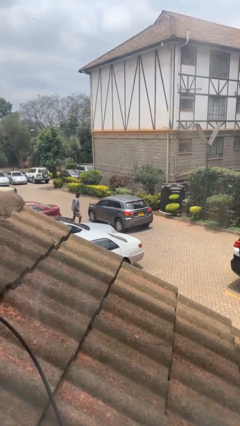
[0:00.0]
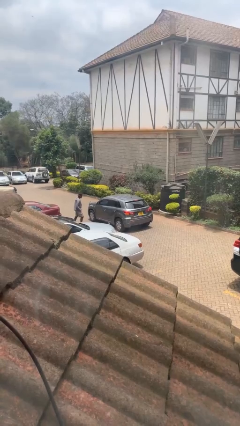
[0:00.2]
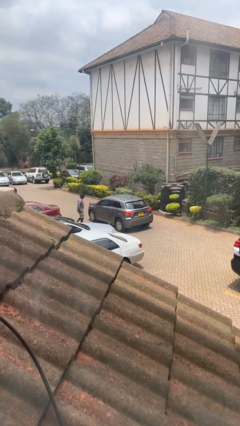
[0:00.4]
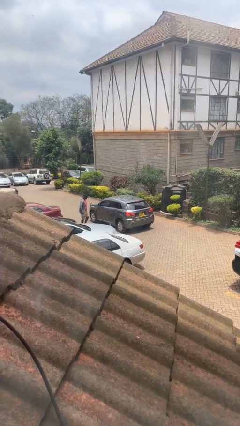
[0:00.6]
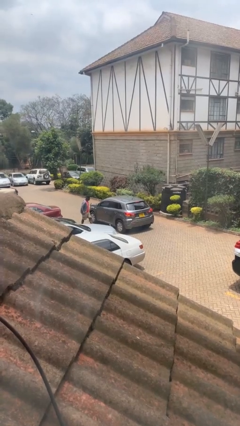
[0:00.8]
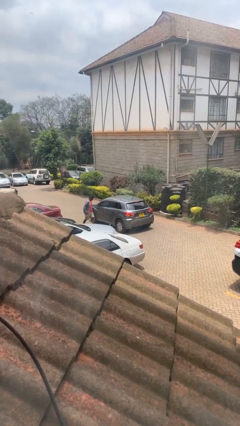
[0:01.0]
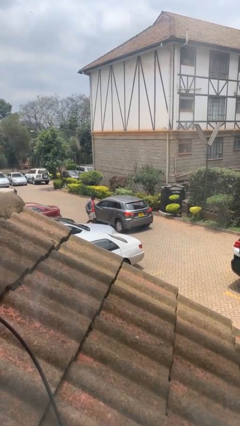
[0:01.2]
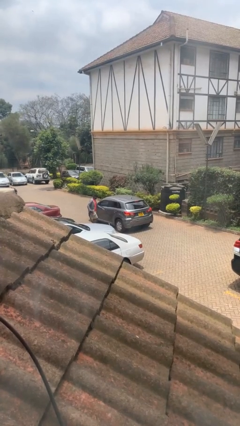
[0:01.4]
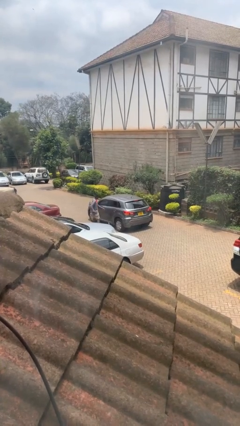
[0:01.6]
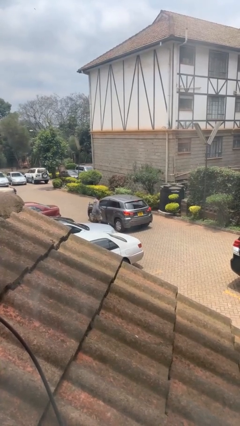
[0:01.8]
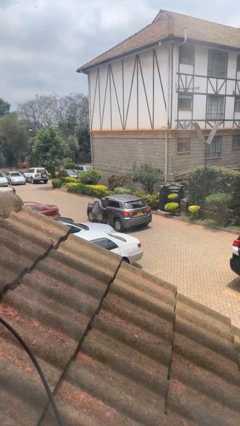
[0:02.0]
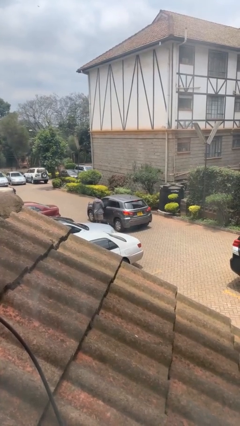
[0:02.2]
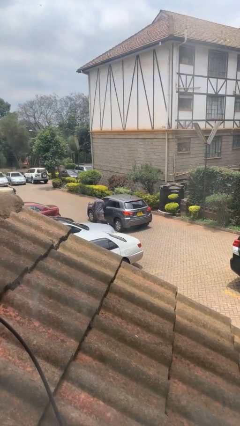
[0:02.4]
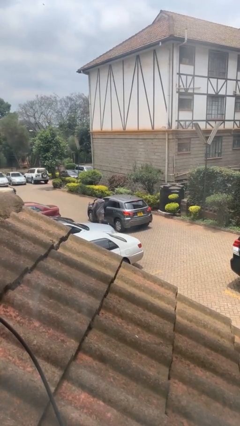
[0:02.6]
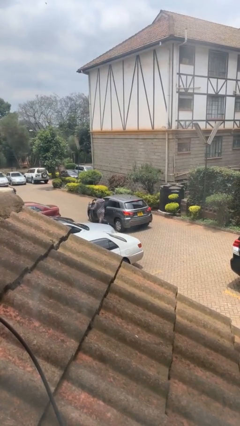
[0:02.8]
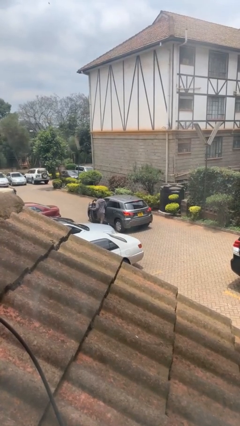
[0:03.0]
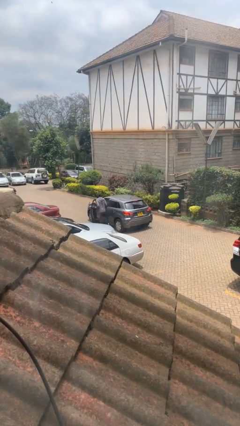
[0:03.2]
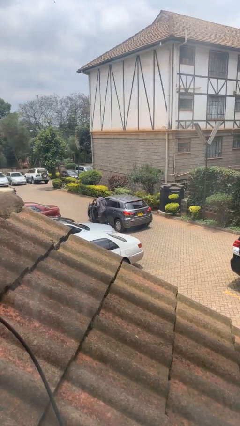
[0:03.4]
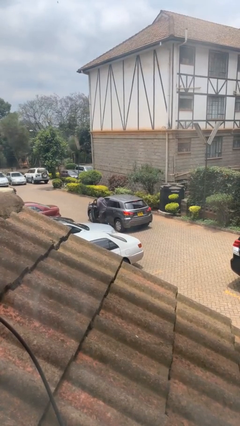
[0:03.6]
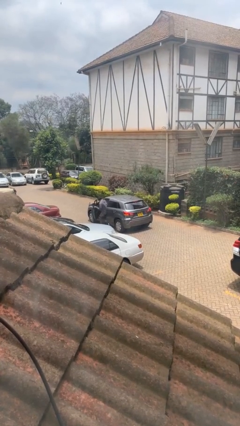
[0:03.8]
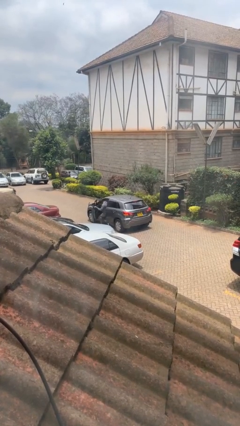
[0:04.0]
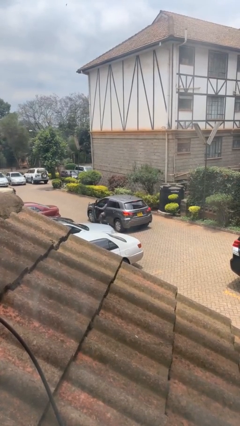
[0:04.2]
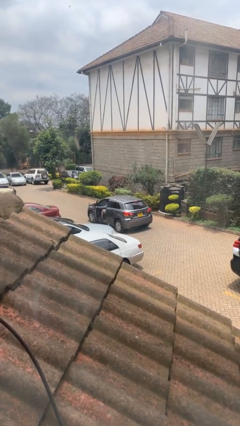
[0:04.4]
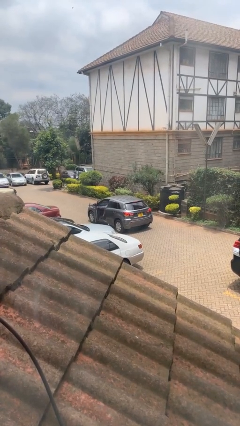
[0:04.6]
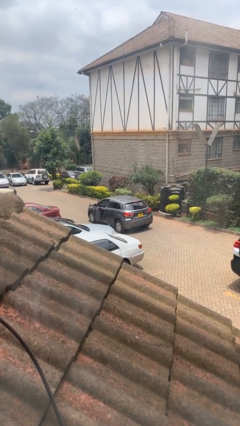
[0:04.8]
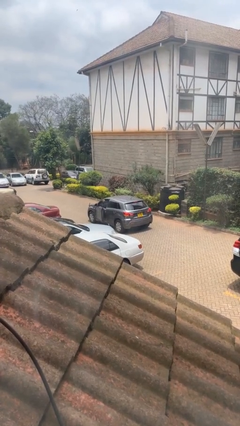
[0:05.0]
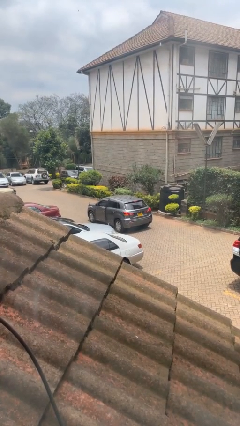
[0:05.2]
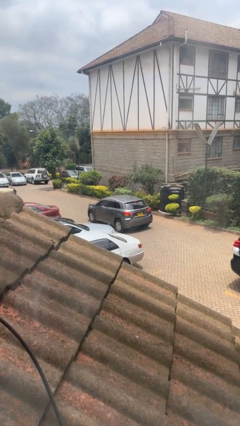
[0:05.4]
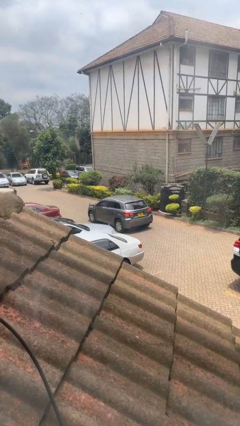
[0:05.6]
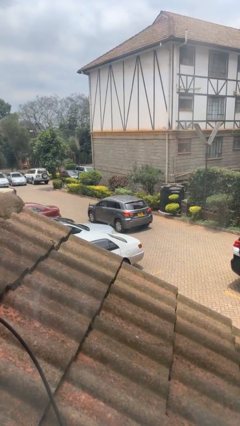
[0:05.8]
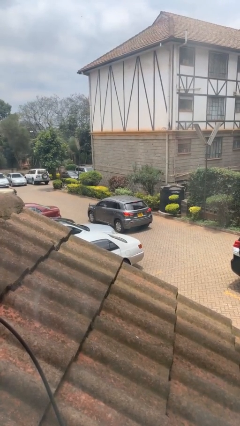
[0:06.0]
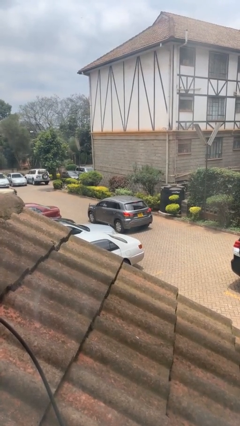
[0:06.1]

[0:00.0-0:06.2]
car picks up person

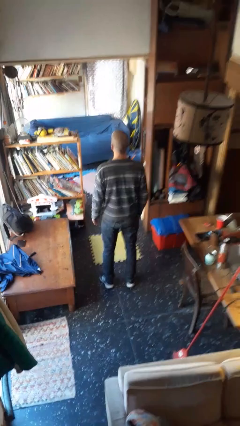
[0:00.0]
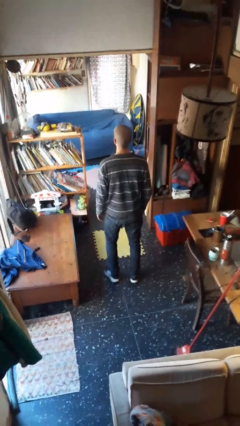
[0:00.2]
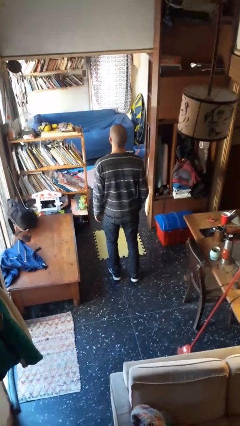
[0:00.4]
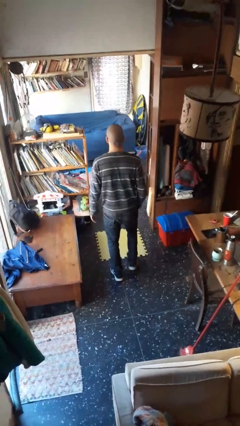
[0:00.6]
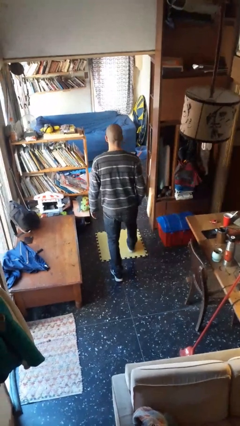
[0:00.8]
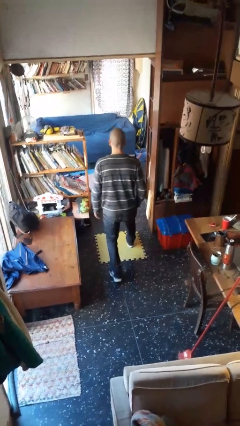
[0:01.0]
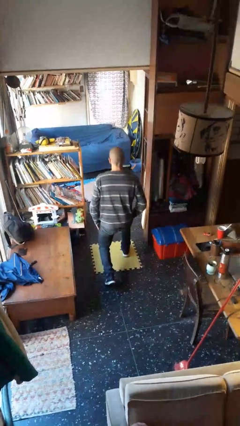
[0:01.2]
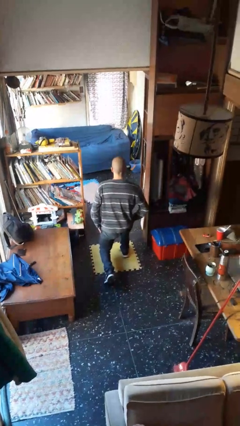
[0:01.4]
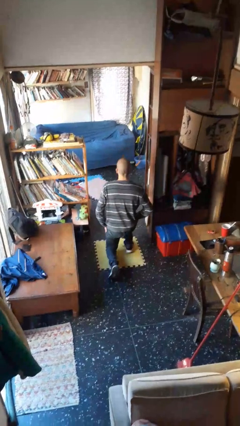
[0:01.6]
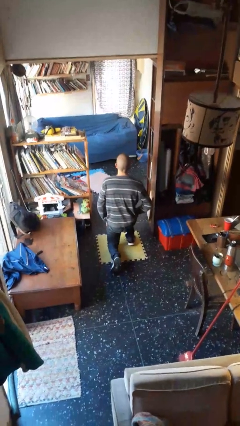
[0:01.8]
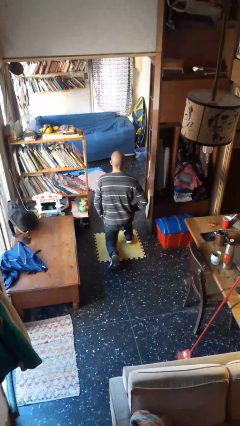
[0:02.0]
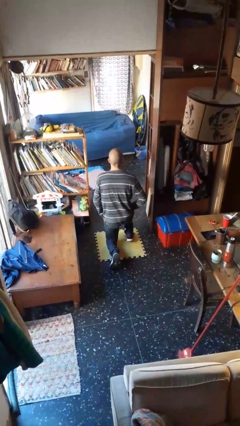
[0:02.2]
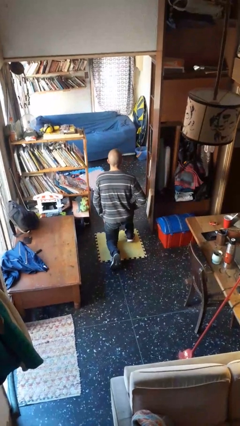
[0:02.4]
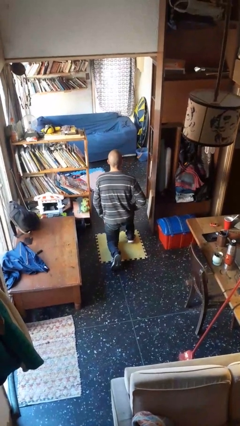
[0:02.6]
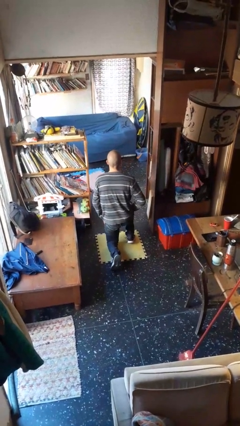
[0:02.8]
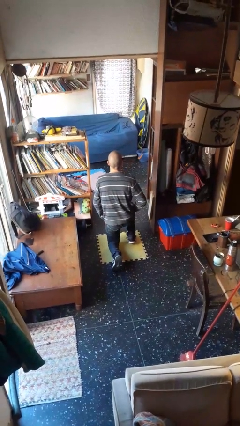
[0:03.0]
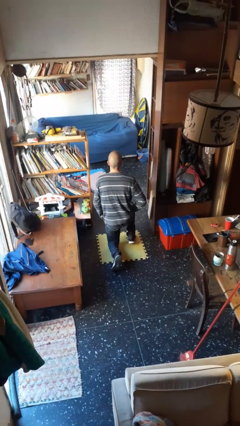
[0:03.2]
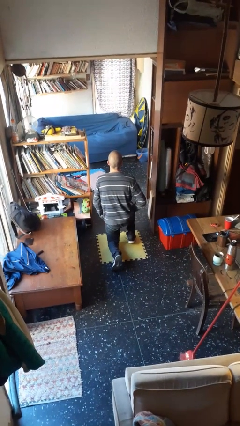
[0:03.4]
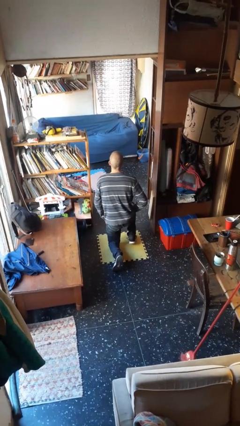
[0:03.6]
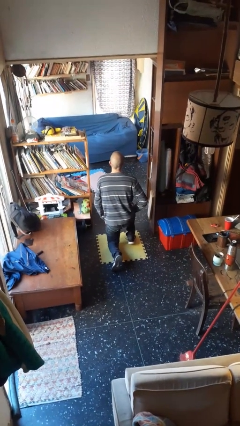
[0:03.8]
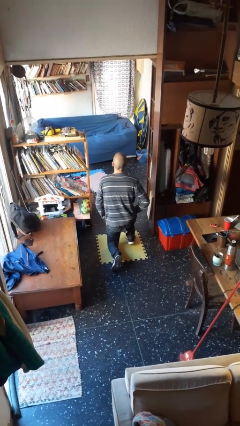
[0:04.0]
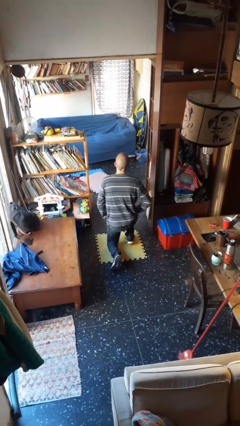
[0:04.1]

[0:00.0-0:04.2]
person kneels

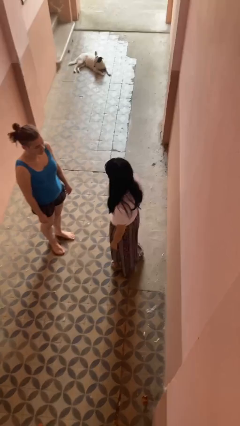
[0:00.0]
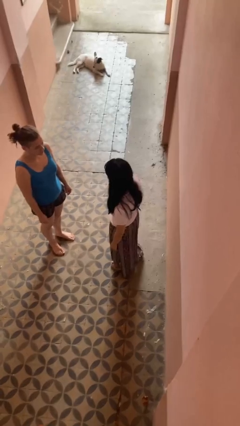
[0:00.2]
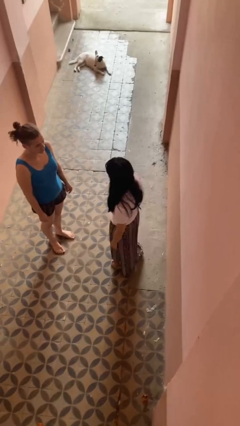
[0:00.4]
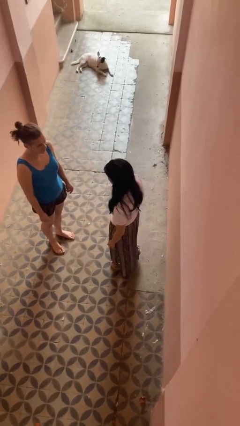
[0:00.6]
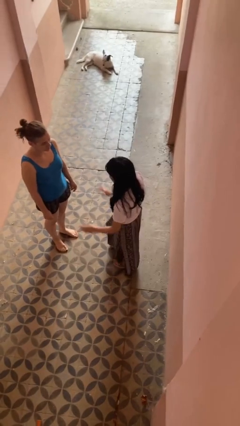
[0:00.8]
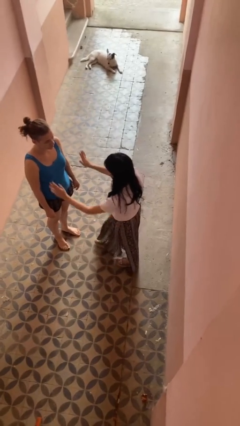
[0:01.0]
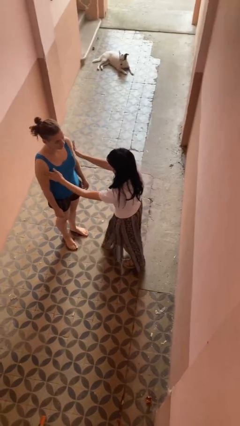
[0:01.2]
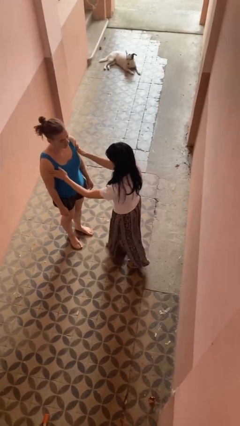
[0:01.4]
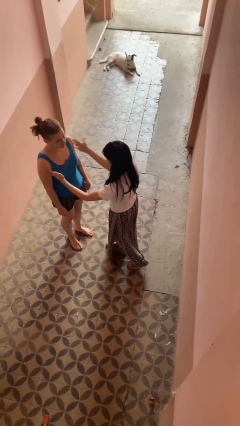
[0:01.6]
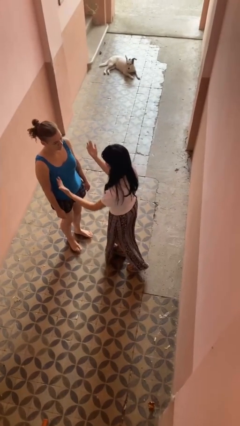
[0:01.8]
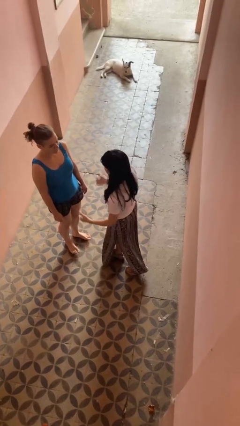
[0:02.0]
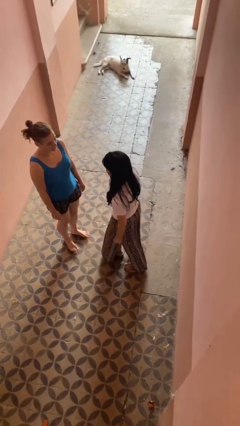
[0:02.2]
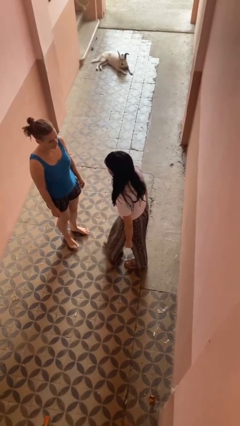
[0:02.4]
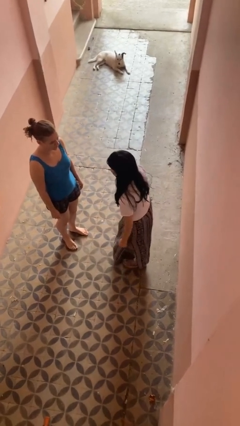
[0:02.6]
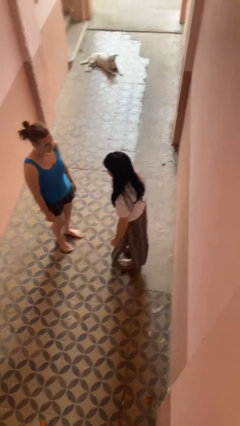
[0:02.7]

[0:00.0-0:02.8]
person shoves person

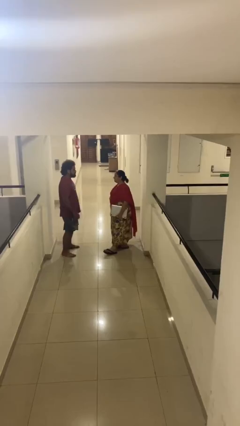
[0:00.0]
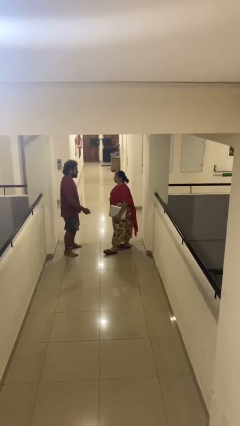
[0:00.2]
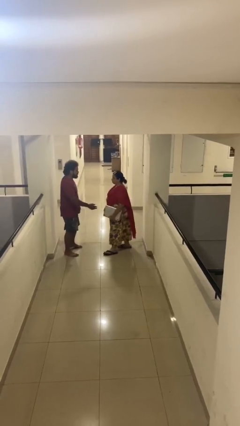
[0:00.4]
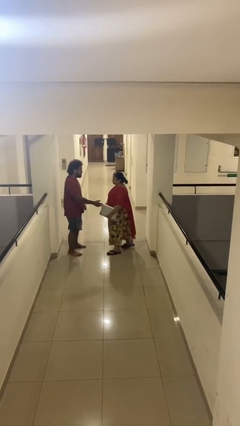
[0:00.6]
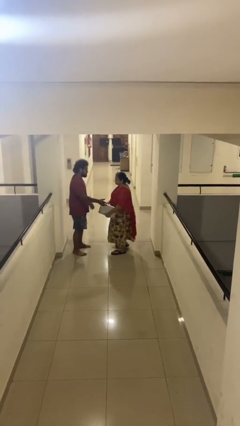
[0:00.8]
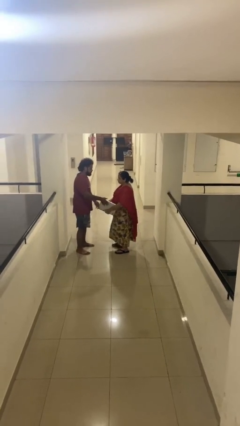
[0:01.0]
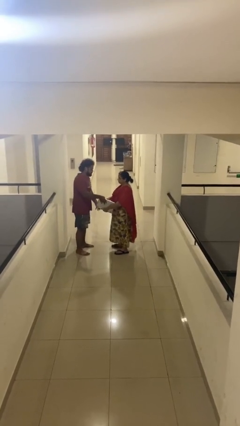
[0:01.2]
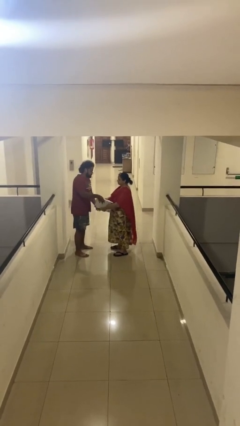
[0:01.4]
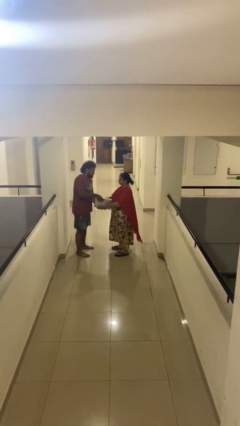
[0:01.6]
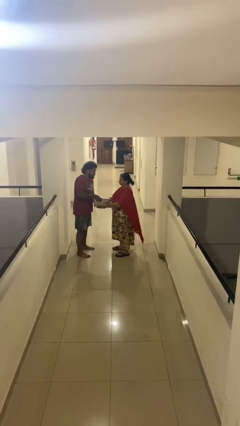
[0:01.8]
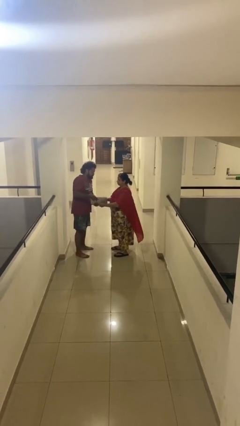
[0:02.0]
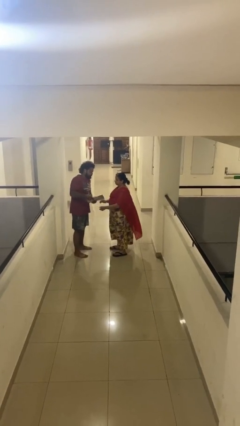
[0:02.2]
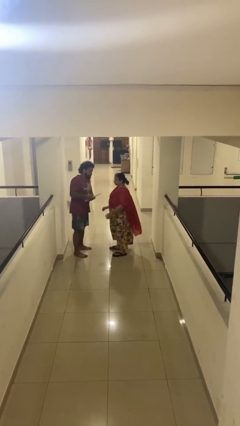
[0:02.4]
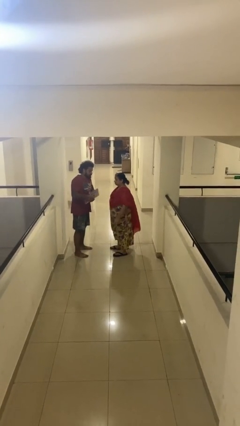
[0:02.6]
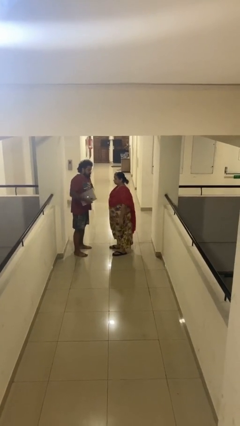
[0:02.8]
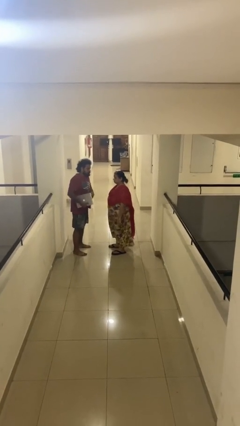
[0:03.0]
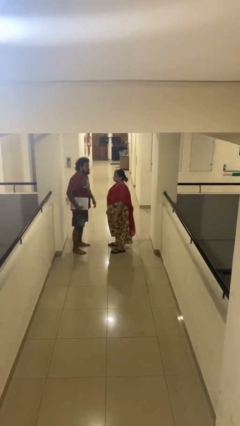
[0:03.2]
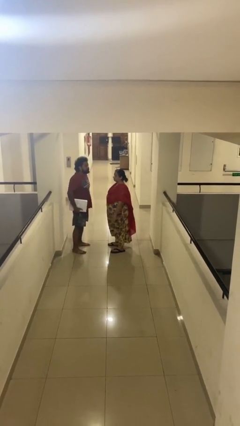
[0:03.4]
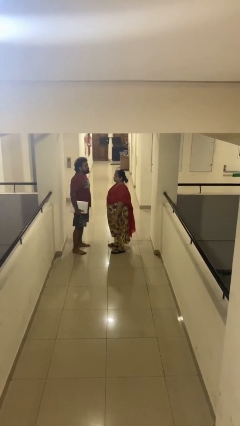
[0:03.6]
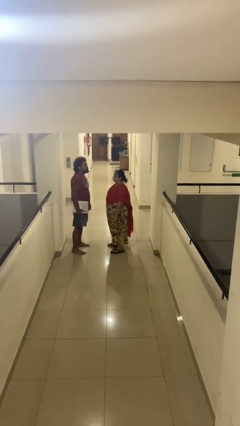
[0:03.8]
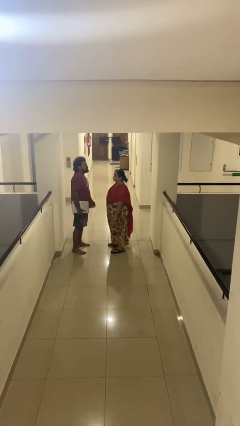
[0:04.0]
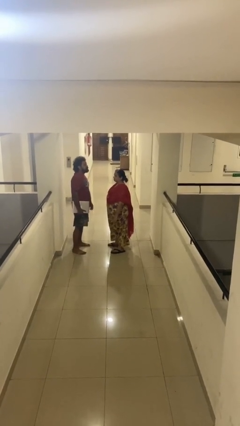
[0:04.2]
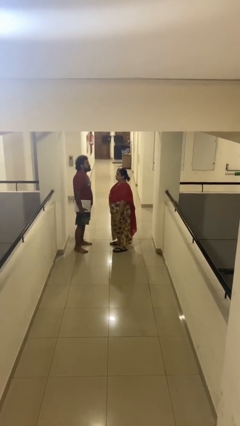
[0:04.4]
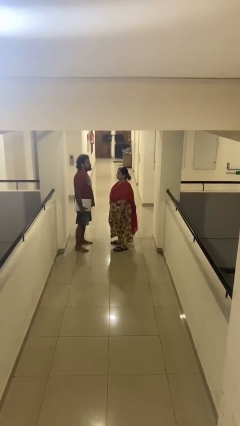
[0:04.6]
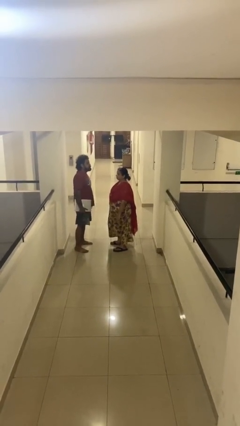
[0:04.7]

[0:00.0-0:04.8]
person transfers object to person
